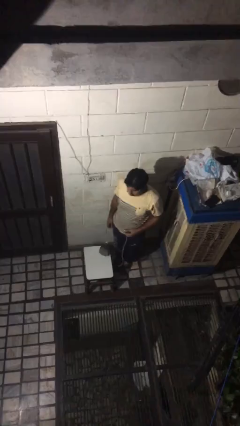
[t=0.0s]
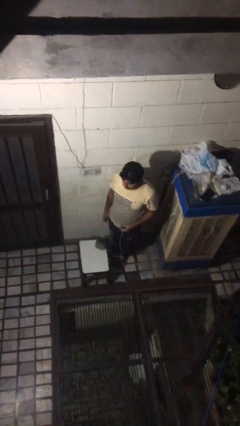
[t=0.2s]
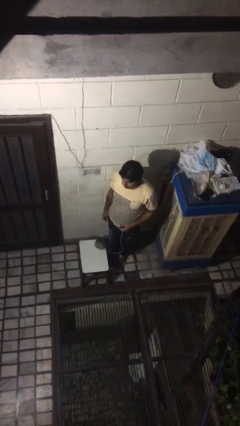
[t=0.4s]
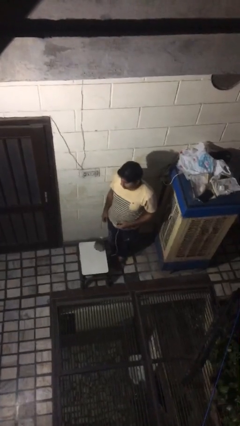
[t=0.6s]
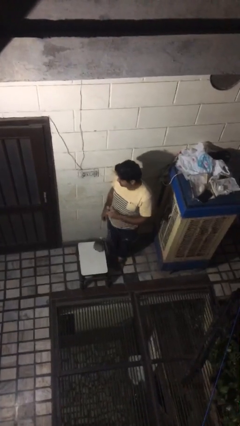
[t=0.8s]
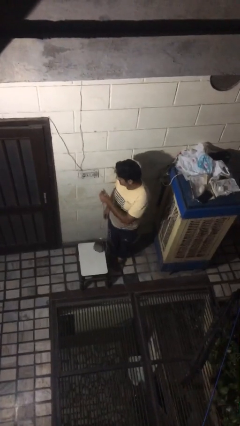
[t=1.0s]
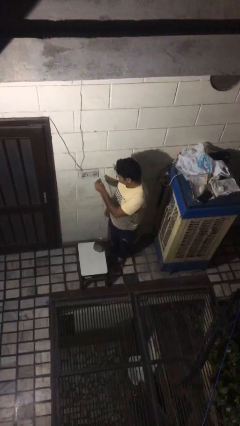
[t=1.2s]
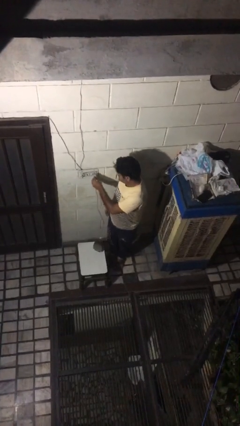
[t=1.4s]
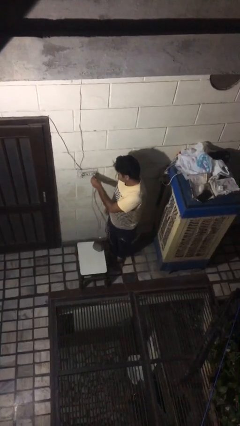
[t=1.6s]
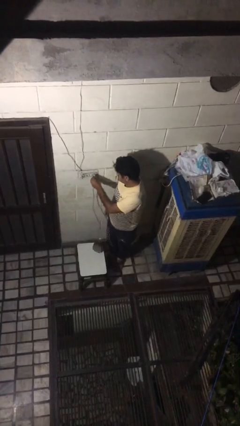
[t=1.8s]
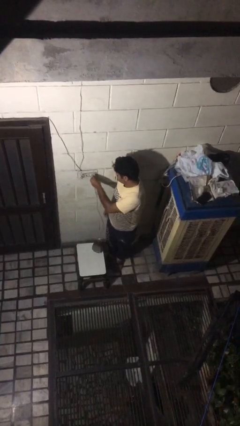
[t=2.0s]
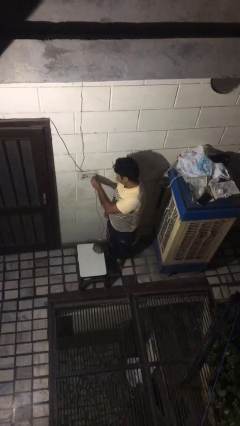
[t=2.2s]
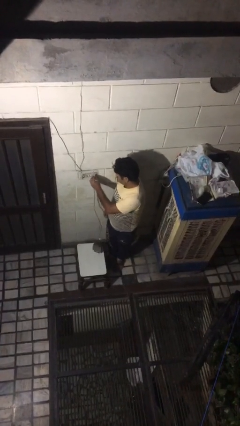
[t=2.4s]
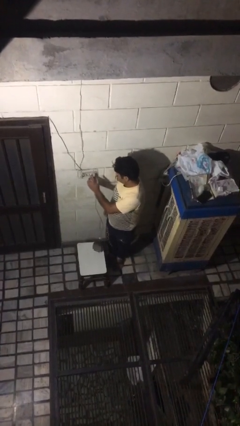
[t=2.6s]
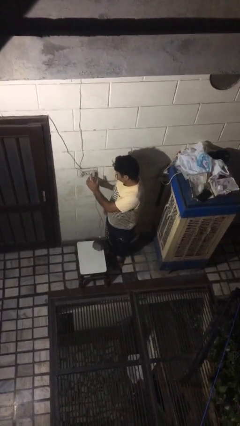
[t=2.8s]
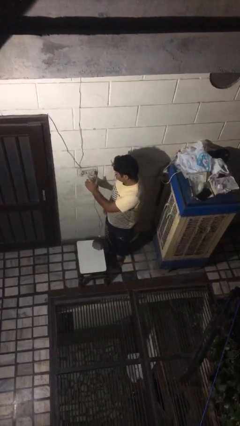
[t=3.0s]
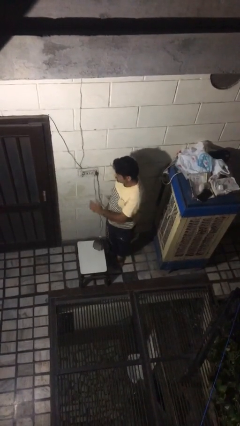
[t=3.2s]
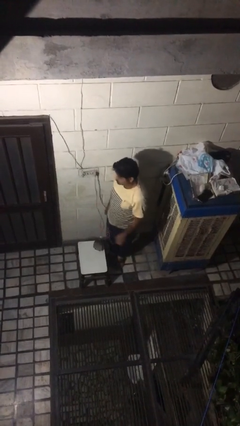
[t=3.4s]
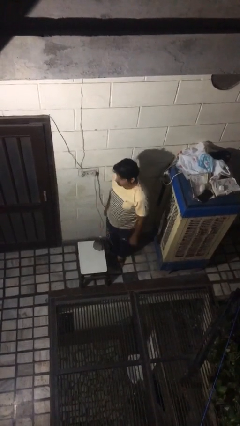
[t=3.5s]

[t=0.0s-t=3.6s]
person plugs into electrical socket

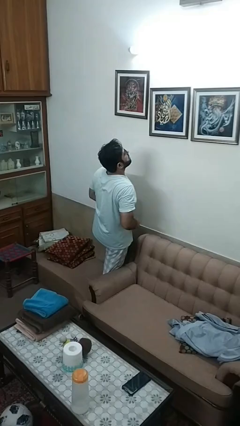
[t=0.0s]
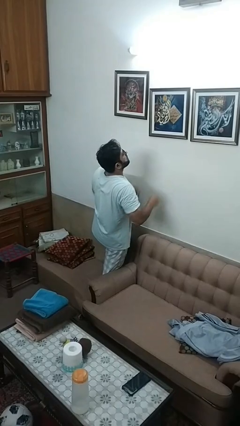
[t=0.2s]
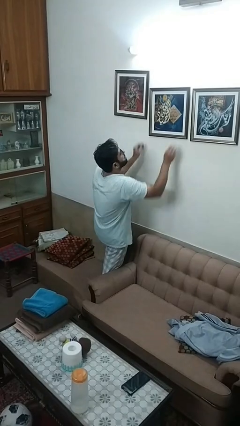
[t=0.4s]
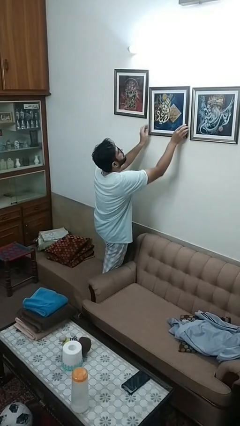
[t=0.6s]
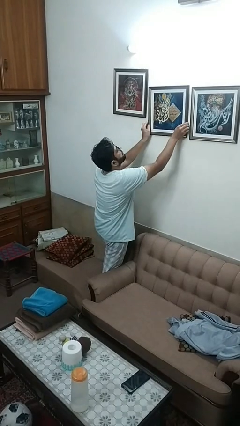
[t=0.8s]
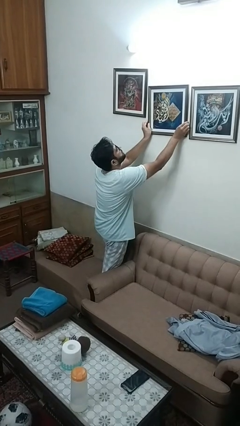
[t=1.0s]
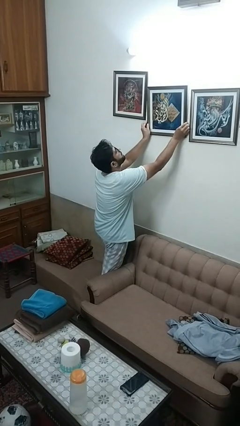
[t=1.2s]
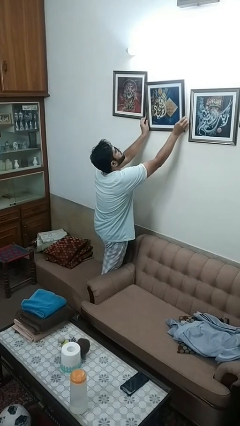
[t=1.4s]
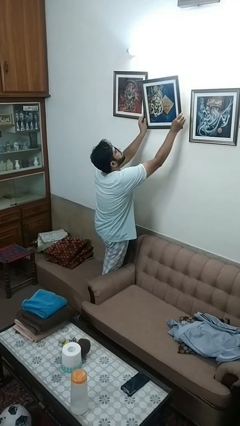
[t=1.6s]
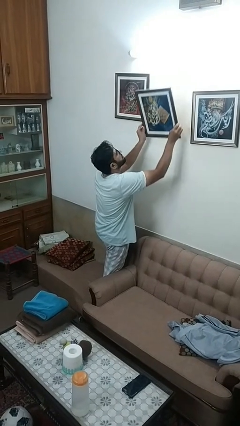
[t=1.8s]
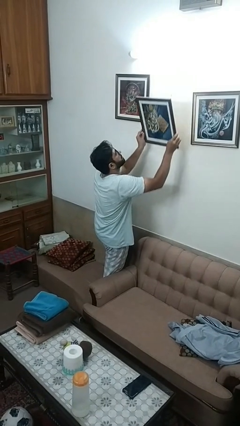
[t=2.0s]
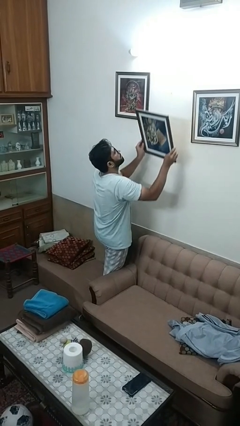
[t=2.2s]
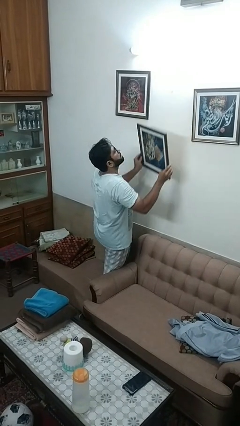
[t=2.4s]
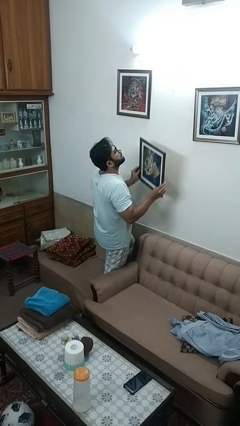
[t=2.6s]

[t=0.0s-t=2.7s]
person takes down picture frame

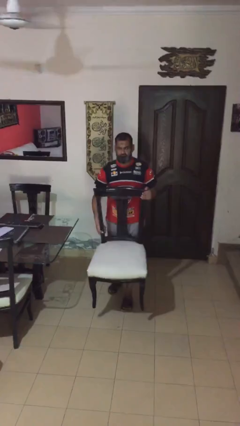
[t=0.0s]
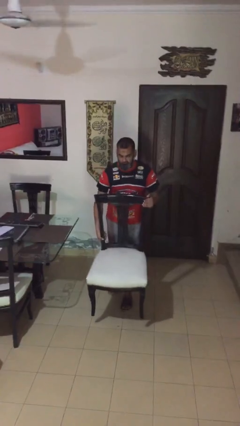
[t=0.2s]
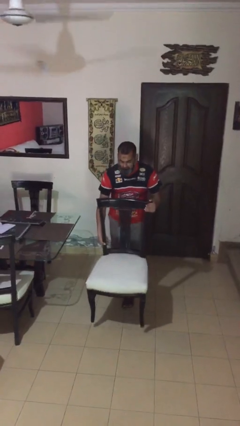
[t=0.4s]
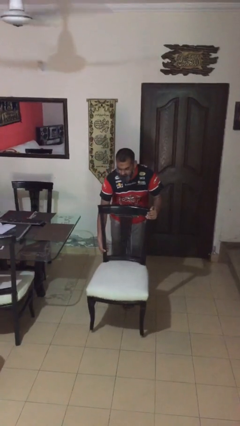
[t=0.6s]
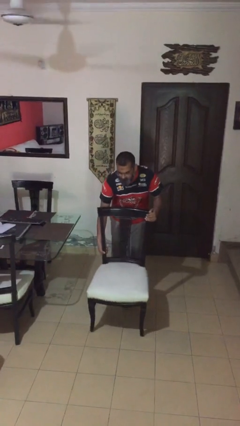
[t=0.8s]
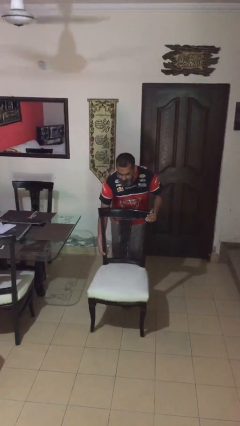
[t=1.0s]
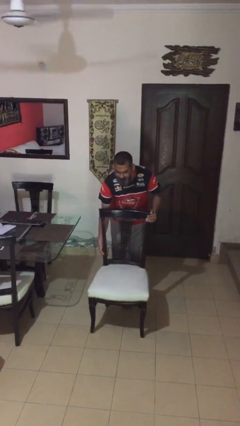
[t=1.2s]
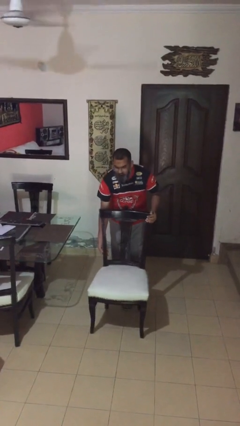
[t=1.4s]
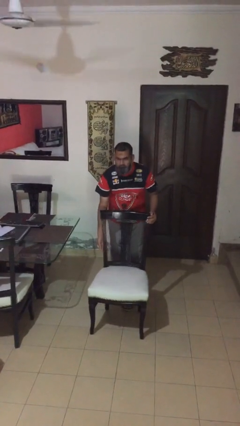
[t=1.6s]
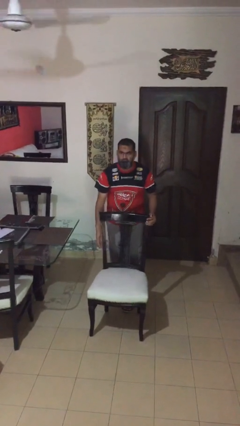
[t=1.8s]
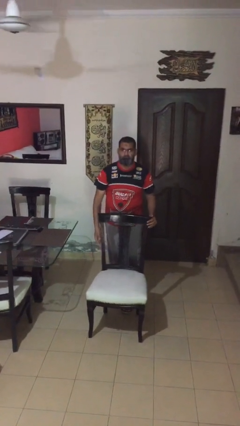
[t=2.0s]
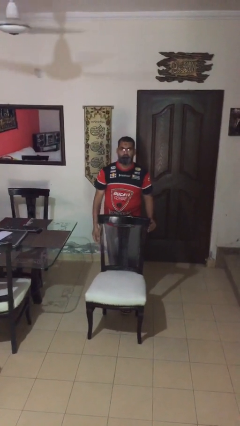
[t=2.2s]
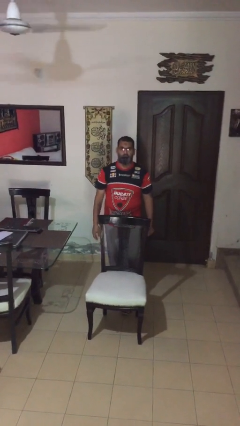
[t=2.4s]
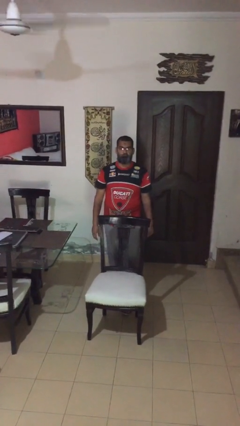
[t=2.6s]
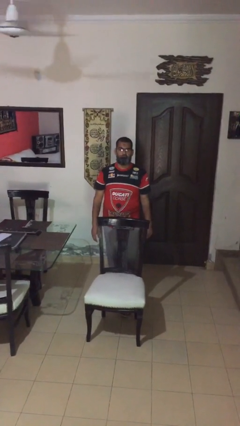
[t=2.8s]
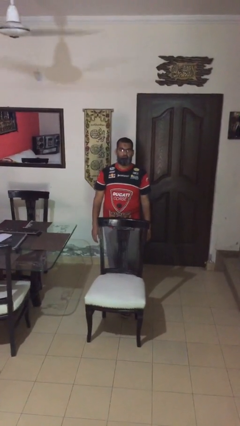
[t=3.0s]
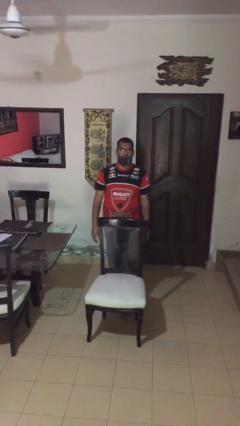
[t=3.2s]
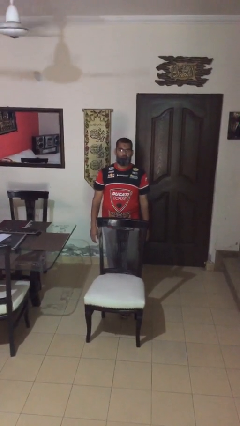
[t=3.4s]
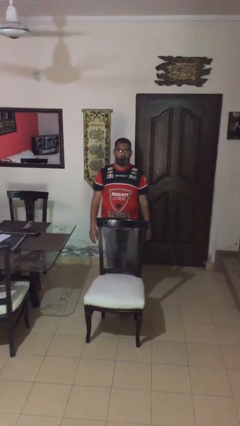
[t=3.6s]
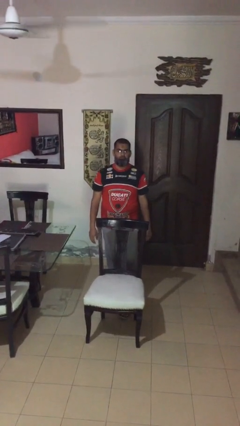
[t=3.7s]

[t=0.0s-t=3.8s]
person puts down object on floor

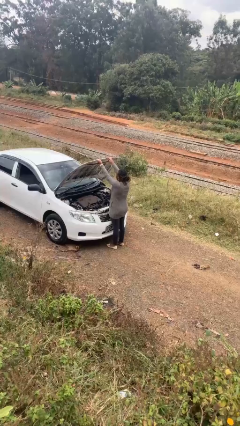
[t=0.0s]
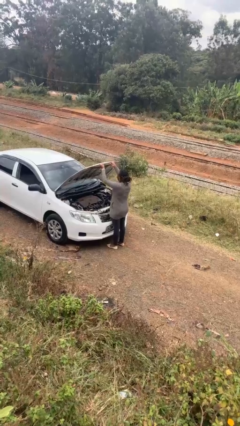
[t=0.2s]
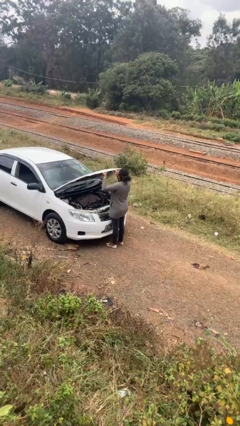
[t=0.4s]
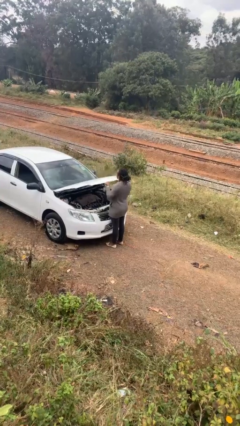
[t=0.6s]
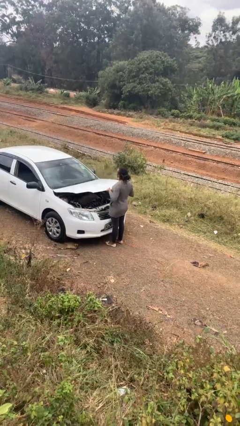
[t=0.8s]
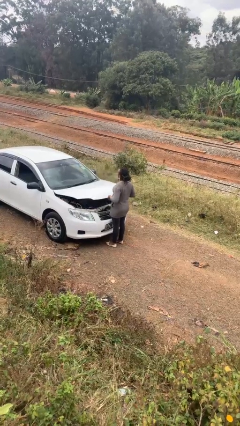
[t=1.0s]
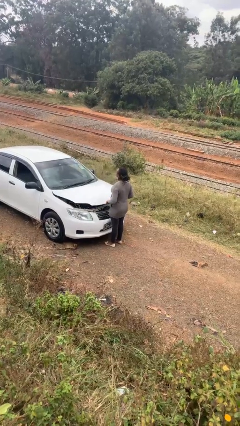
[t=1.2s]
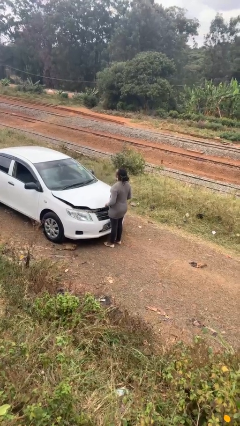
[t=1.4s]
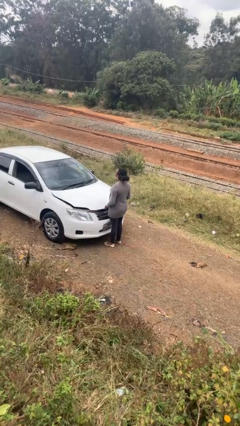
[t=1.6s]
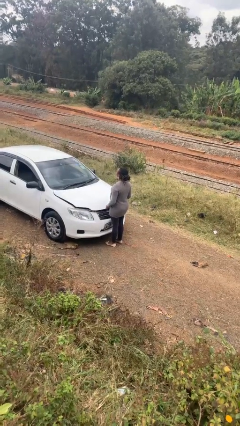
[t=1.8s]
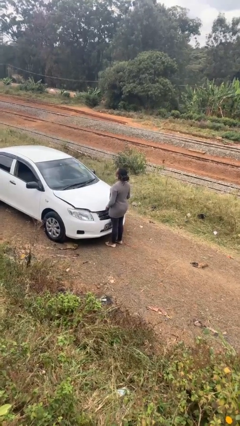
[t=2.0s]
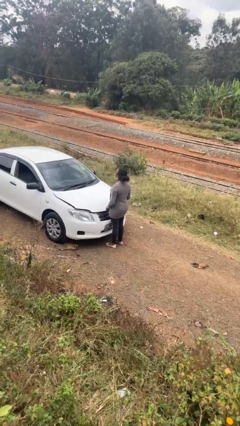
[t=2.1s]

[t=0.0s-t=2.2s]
person closes car hood

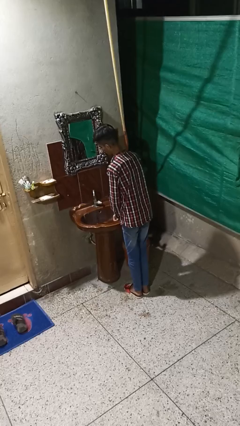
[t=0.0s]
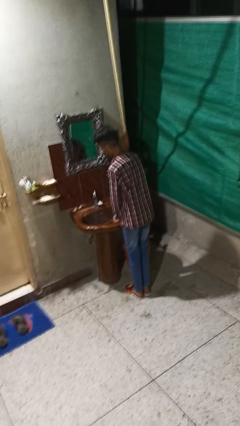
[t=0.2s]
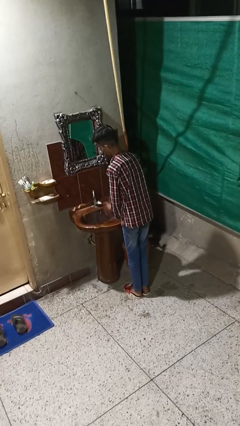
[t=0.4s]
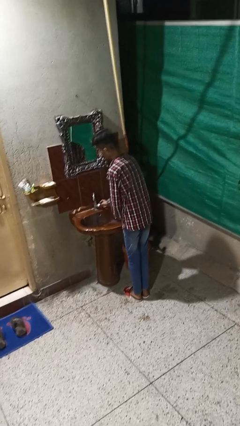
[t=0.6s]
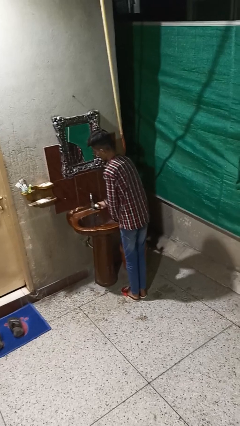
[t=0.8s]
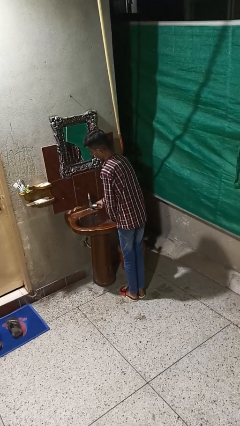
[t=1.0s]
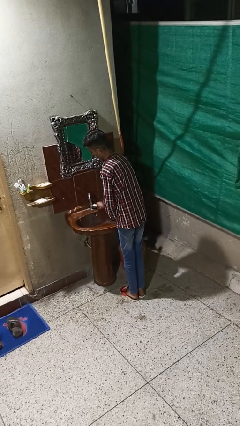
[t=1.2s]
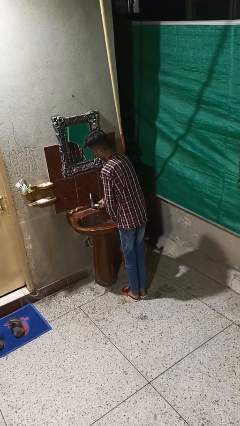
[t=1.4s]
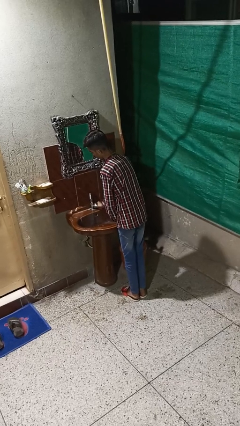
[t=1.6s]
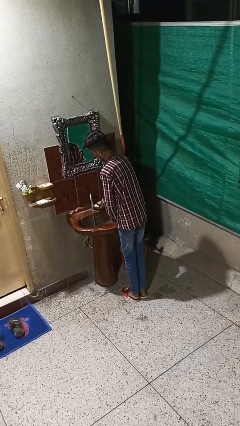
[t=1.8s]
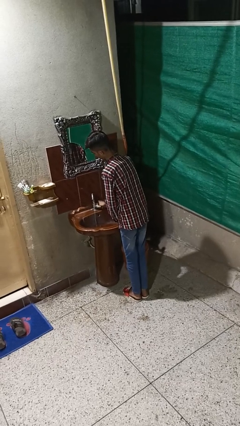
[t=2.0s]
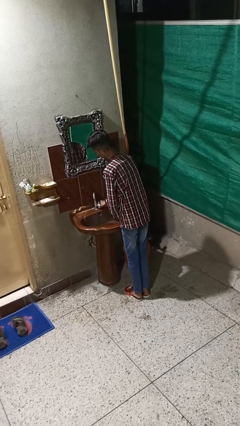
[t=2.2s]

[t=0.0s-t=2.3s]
person turns off faucet

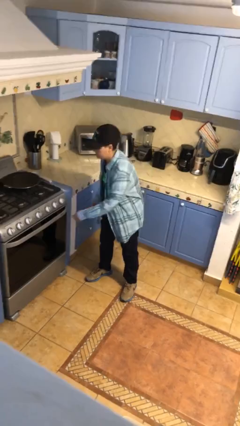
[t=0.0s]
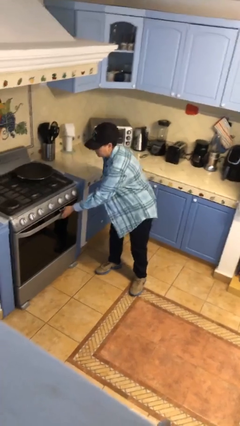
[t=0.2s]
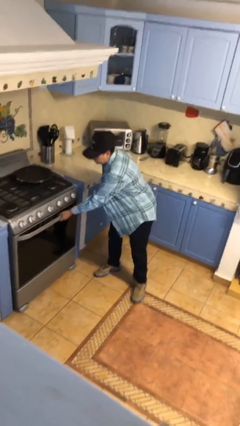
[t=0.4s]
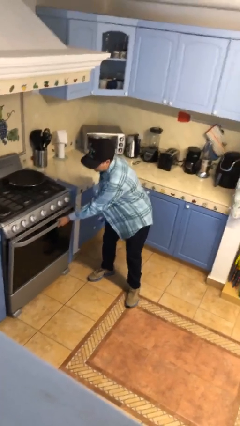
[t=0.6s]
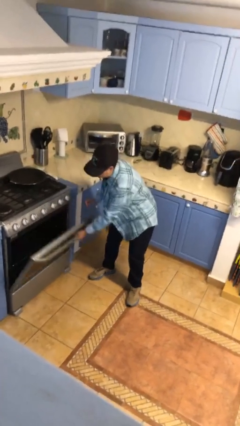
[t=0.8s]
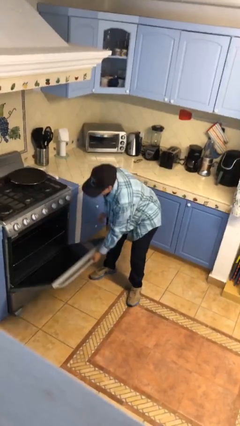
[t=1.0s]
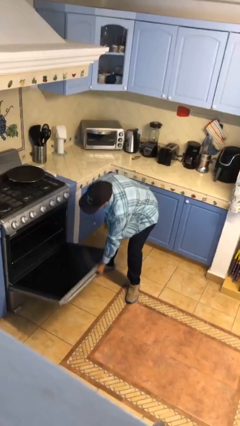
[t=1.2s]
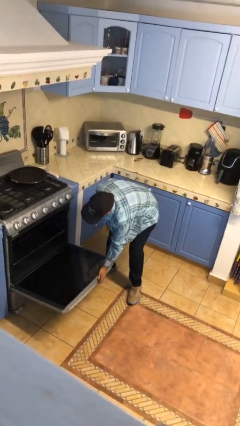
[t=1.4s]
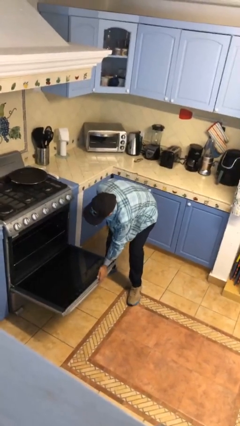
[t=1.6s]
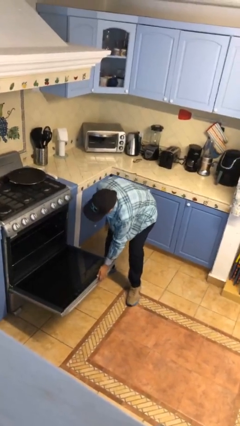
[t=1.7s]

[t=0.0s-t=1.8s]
person opens oven door

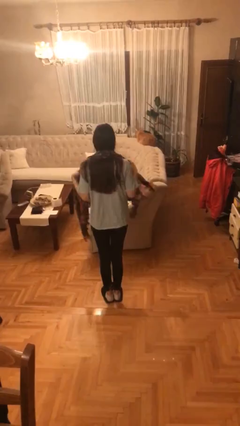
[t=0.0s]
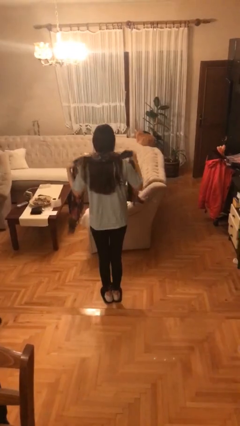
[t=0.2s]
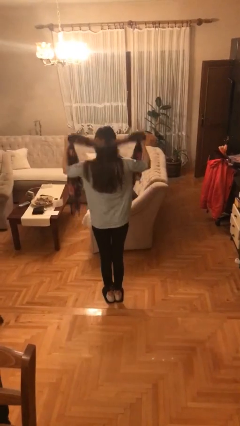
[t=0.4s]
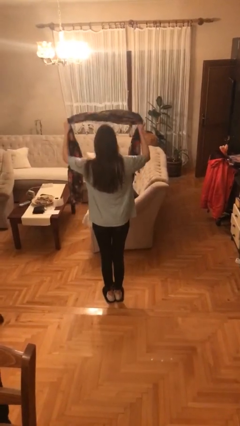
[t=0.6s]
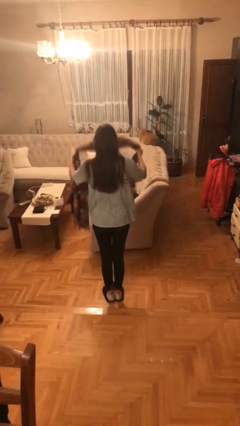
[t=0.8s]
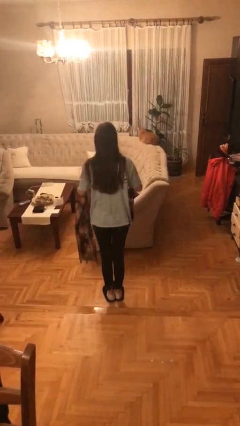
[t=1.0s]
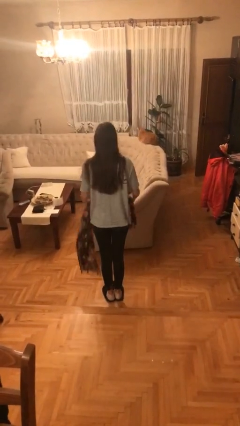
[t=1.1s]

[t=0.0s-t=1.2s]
person takes off scarf
